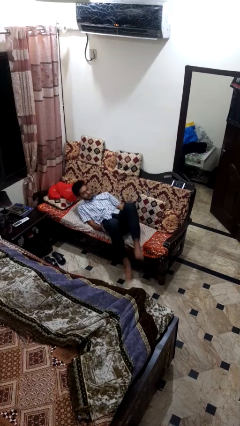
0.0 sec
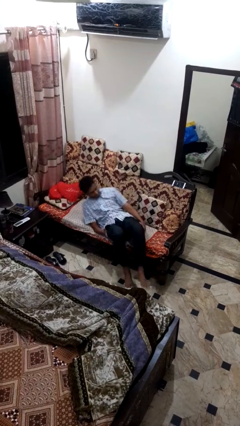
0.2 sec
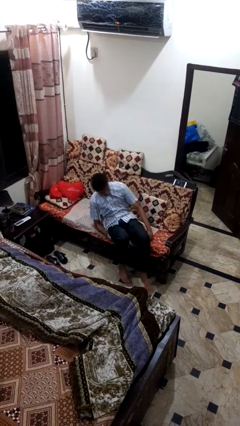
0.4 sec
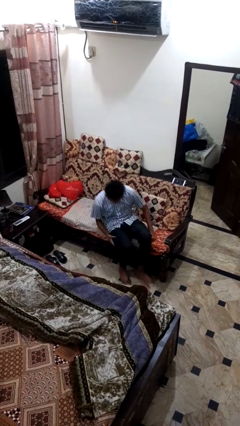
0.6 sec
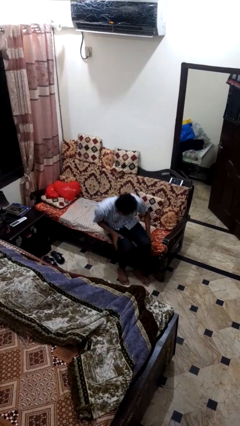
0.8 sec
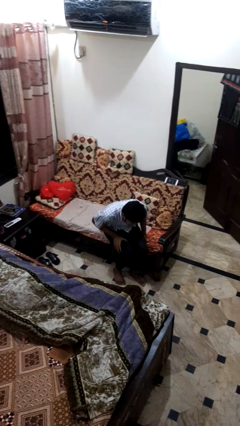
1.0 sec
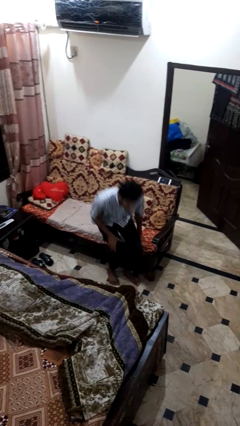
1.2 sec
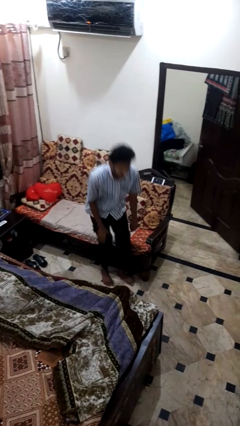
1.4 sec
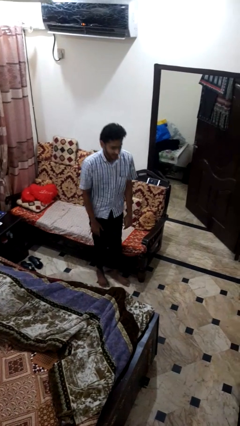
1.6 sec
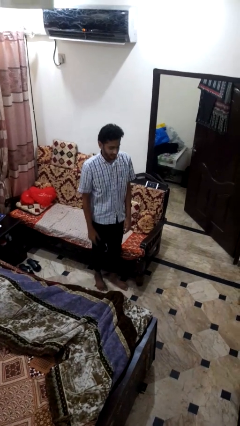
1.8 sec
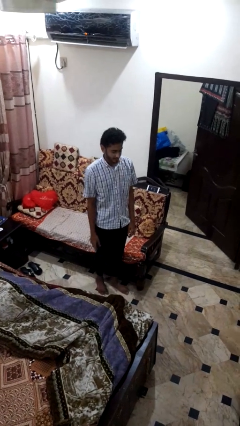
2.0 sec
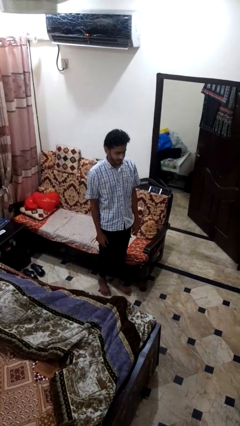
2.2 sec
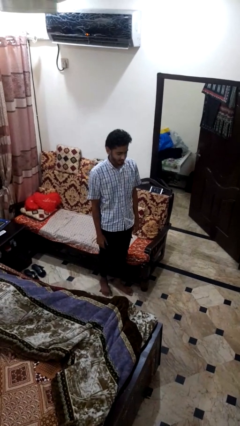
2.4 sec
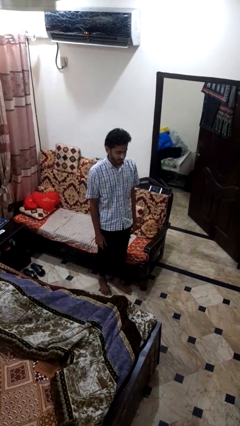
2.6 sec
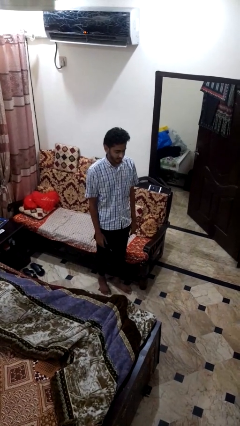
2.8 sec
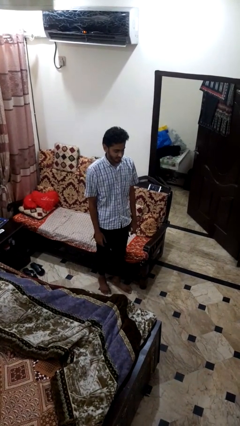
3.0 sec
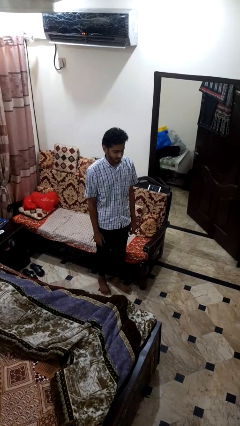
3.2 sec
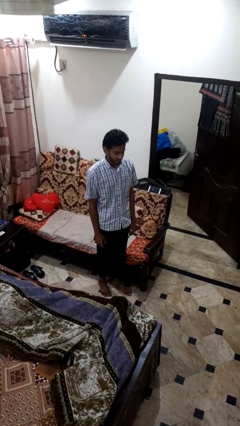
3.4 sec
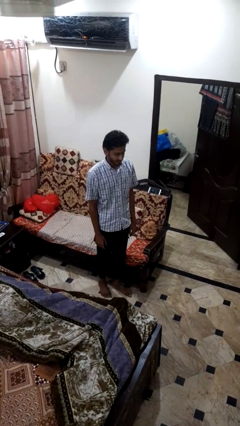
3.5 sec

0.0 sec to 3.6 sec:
person stands up

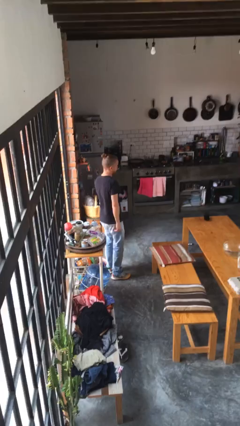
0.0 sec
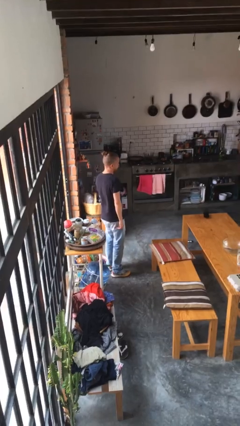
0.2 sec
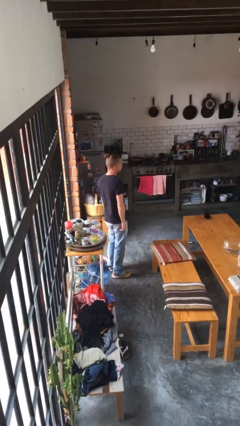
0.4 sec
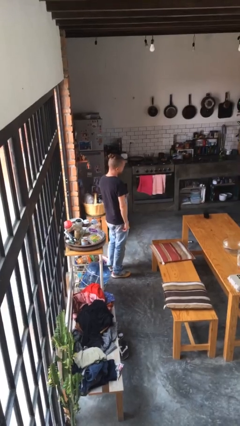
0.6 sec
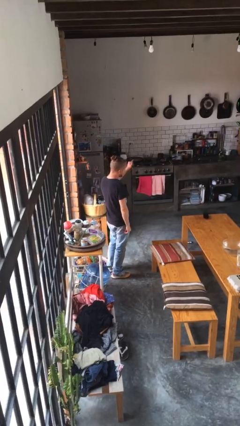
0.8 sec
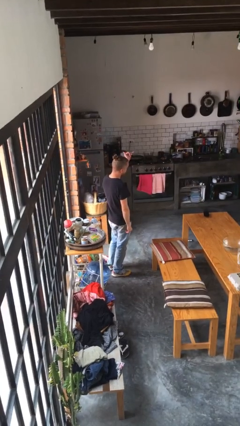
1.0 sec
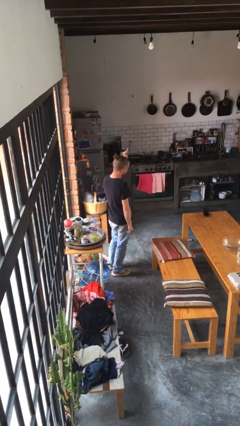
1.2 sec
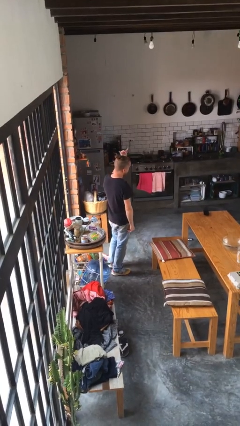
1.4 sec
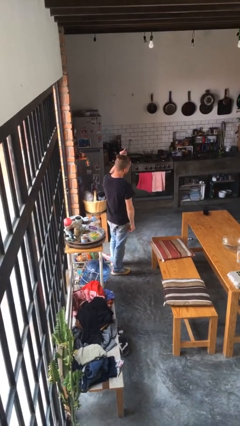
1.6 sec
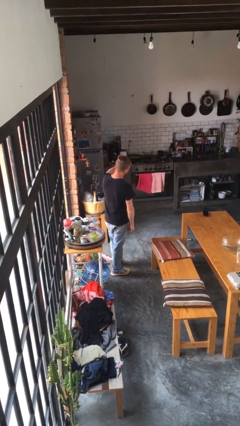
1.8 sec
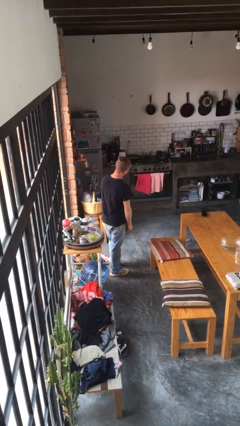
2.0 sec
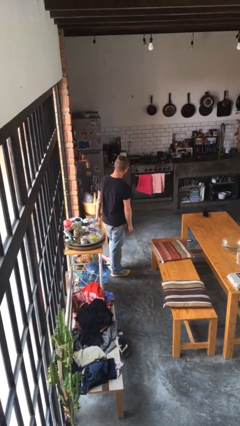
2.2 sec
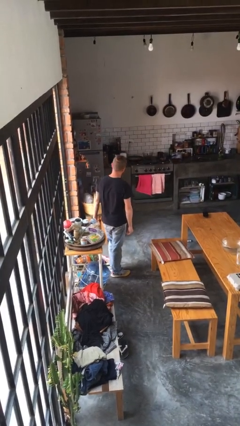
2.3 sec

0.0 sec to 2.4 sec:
person gestures hang loose

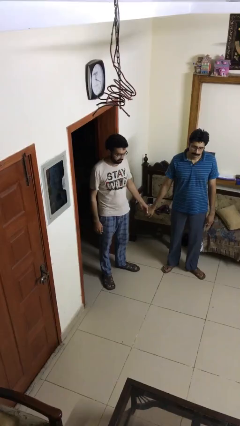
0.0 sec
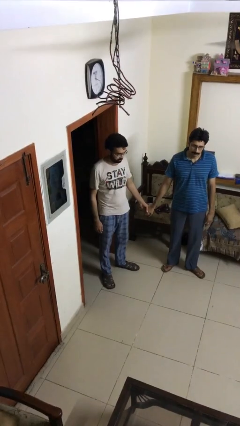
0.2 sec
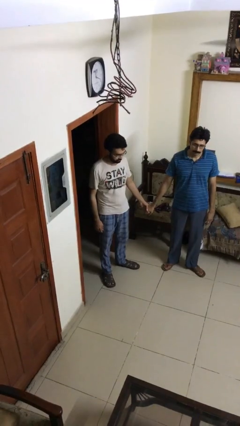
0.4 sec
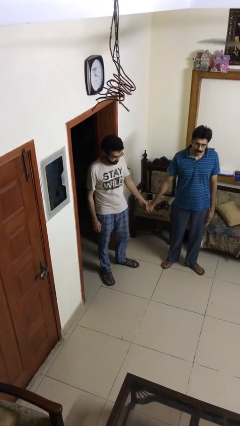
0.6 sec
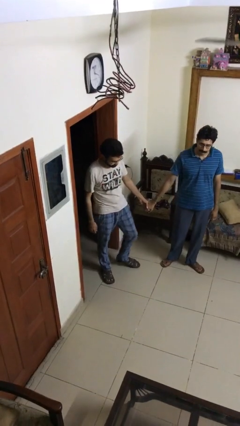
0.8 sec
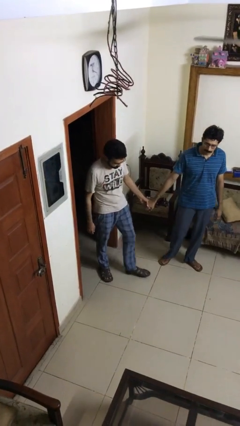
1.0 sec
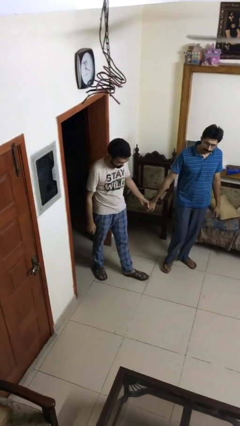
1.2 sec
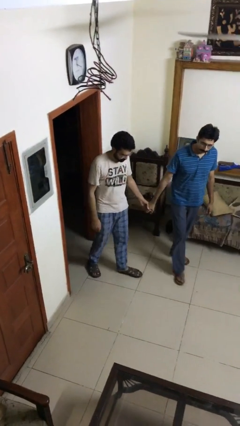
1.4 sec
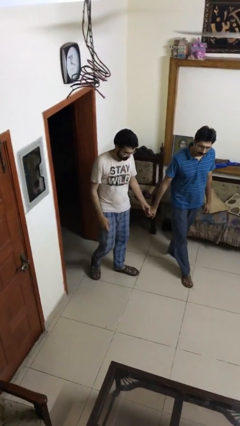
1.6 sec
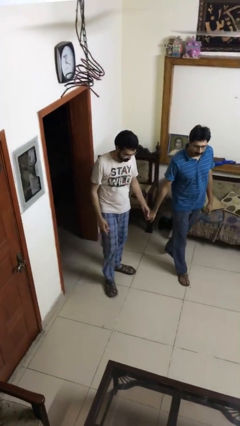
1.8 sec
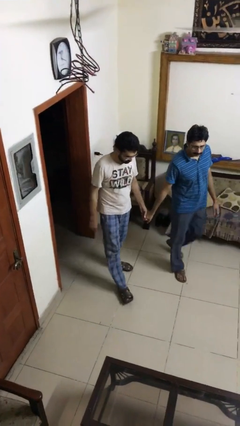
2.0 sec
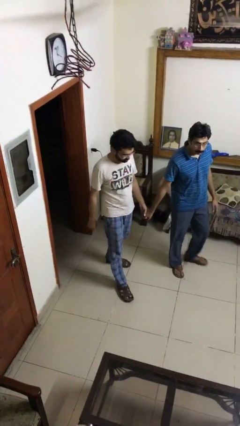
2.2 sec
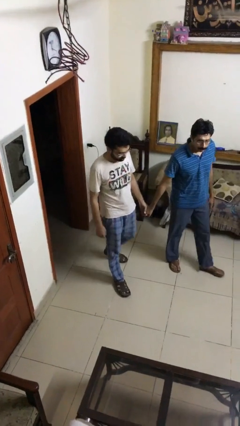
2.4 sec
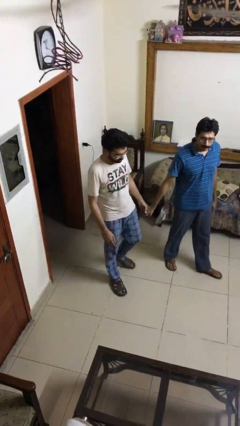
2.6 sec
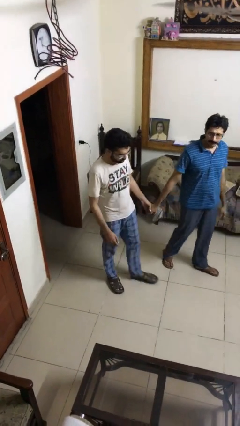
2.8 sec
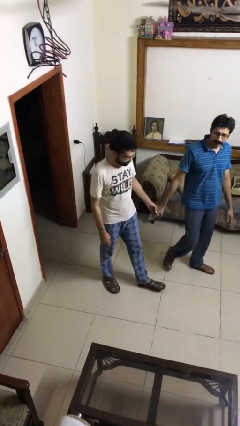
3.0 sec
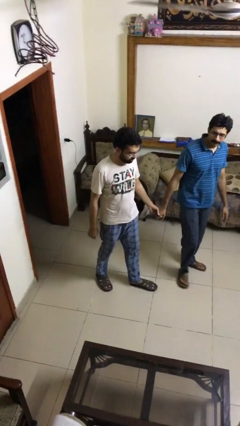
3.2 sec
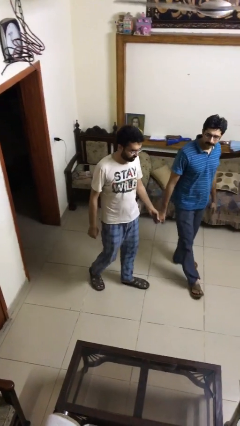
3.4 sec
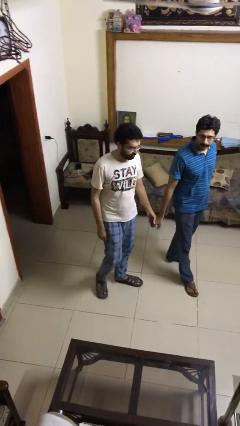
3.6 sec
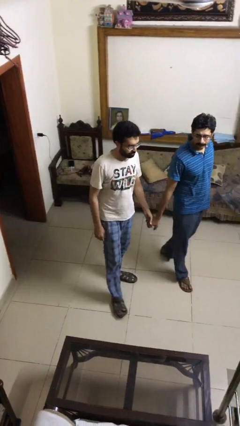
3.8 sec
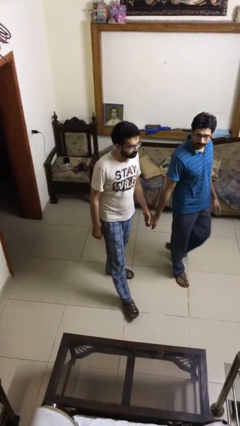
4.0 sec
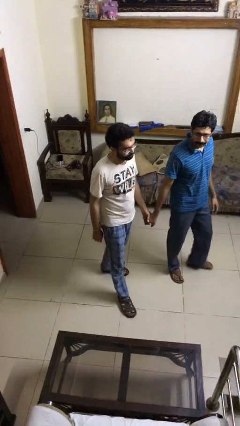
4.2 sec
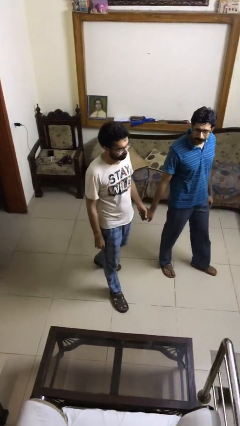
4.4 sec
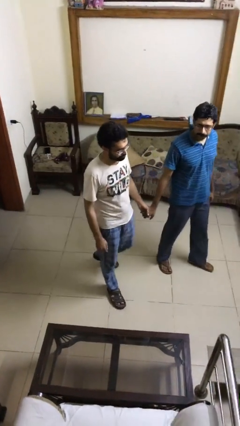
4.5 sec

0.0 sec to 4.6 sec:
person holds hand

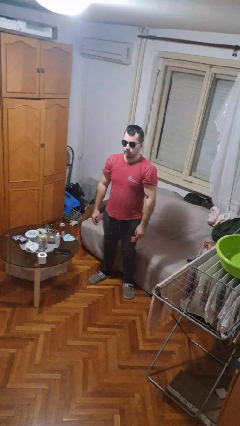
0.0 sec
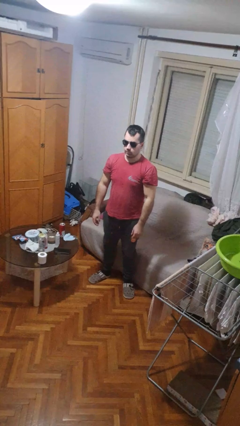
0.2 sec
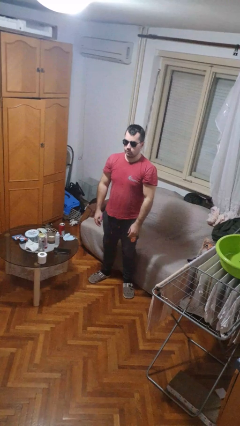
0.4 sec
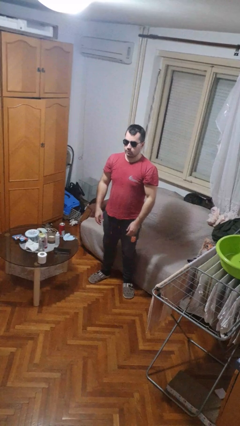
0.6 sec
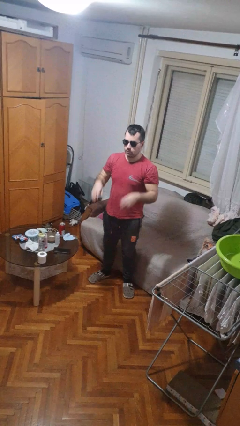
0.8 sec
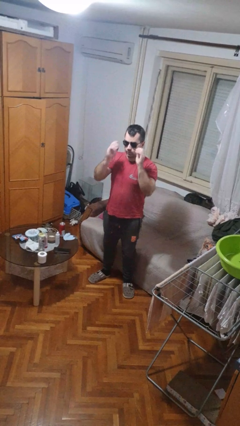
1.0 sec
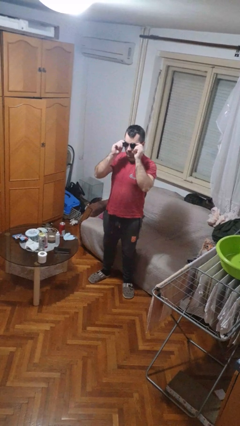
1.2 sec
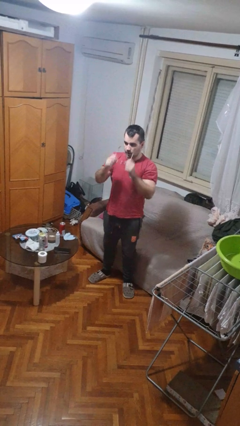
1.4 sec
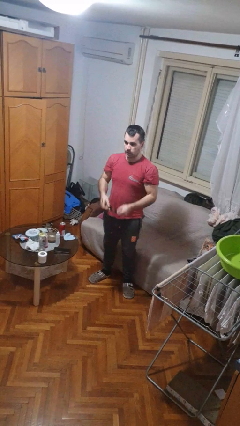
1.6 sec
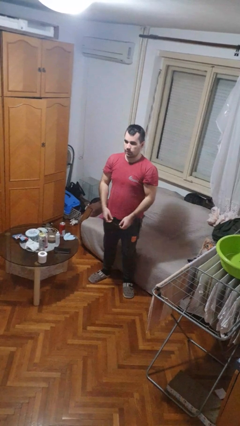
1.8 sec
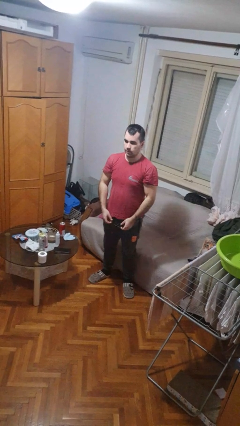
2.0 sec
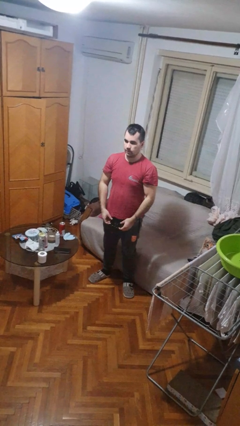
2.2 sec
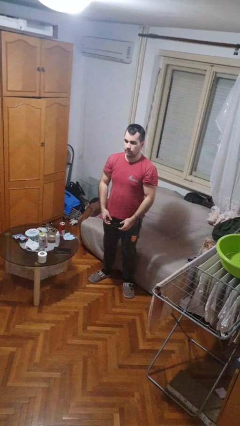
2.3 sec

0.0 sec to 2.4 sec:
person takes off sunglasses

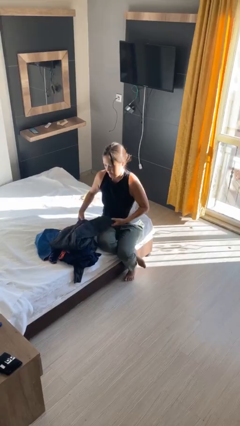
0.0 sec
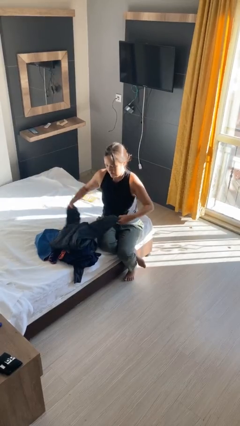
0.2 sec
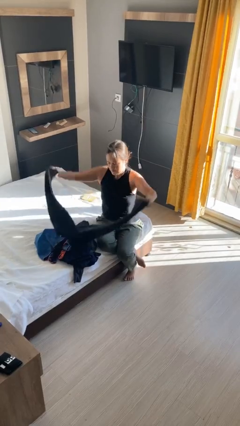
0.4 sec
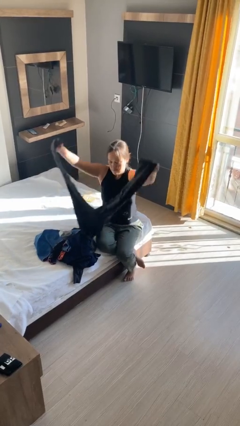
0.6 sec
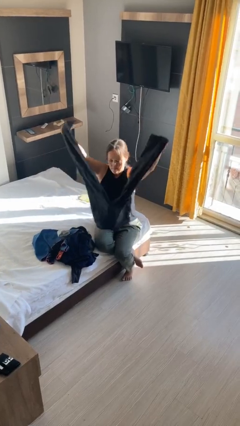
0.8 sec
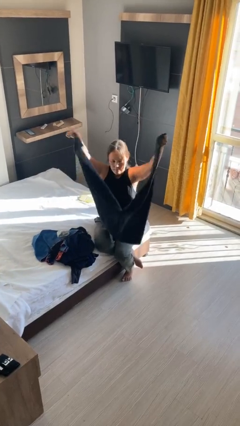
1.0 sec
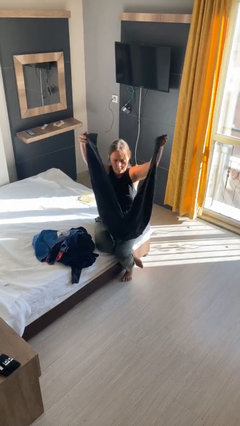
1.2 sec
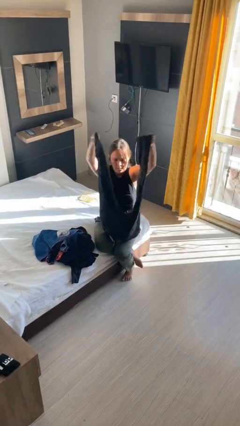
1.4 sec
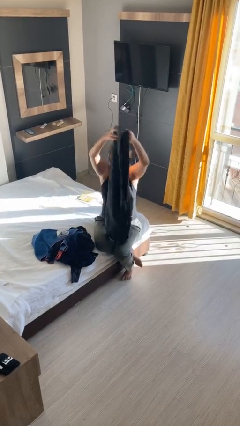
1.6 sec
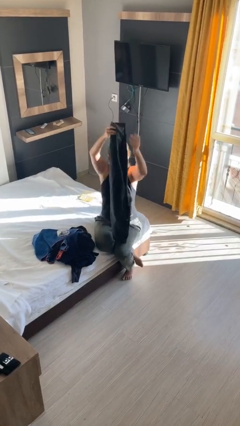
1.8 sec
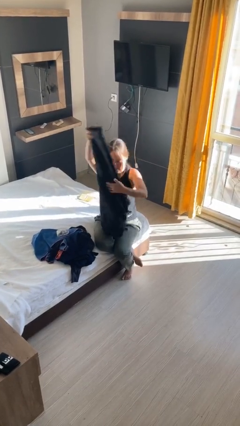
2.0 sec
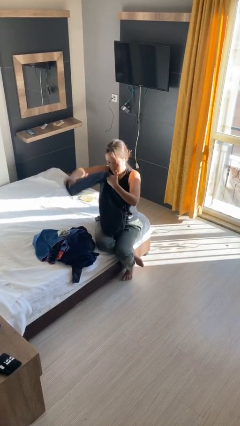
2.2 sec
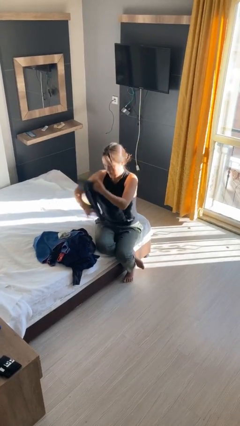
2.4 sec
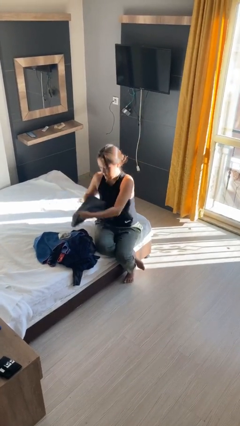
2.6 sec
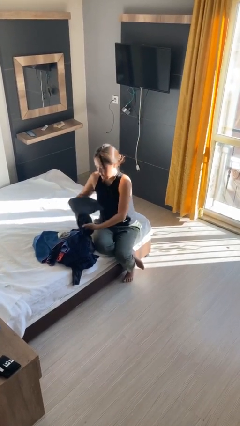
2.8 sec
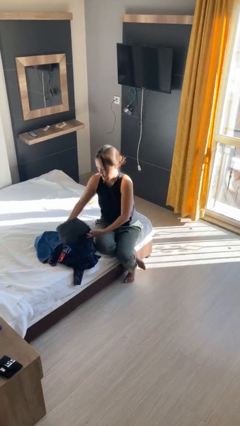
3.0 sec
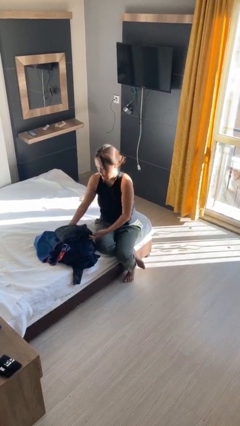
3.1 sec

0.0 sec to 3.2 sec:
person folds pants

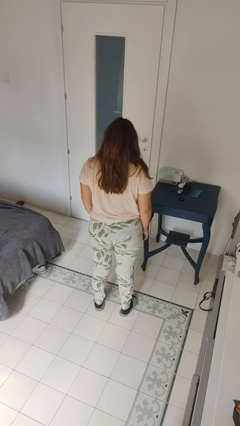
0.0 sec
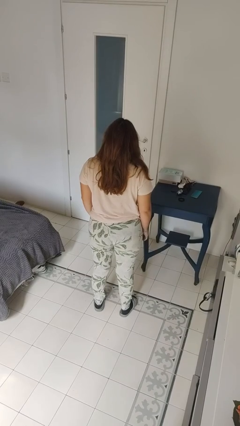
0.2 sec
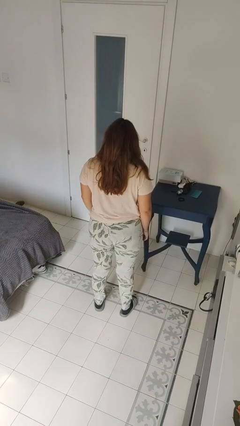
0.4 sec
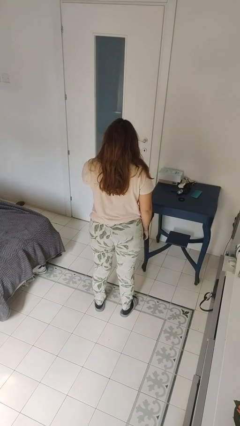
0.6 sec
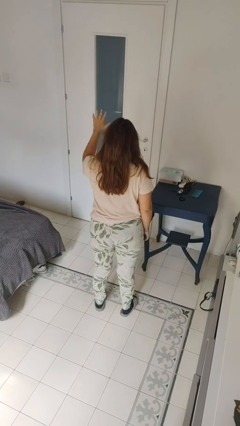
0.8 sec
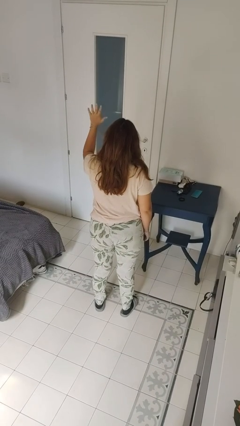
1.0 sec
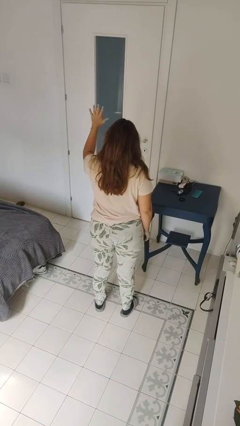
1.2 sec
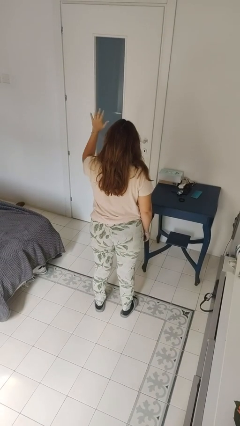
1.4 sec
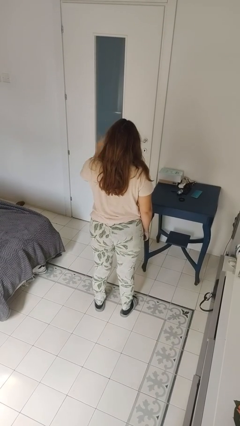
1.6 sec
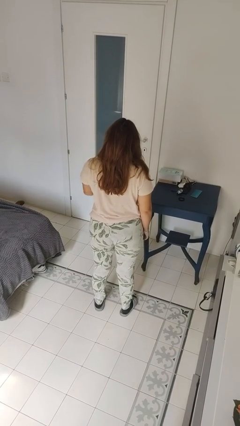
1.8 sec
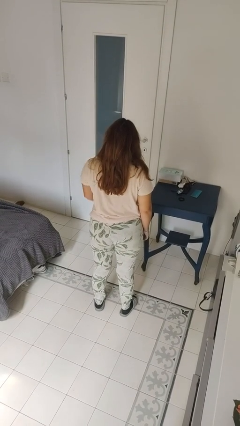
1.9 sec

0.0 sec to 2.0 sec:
person gestures number five
